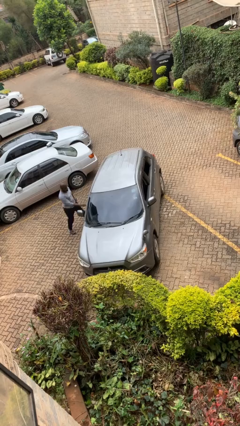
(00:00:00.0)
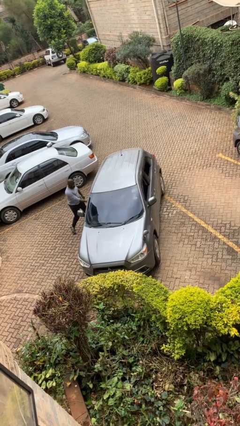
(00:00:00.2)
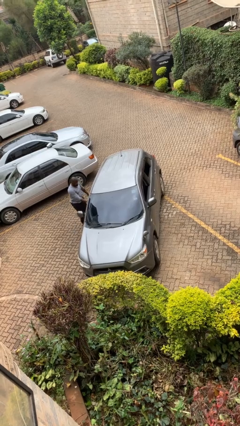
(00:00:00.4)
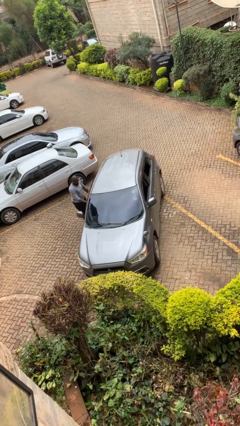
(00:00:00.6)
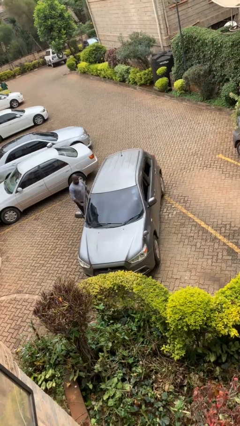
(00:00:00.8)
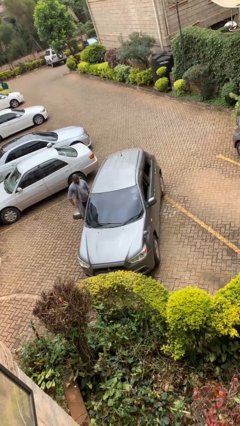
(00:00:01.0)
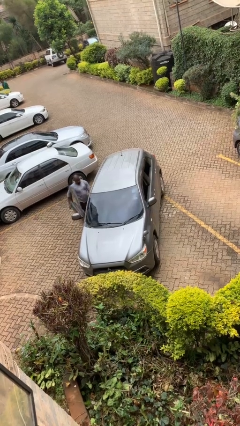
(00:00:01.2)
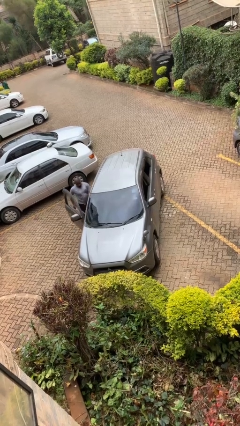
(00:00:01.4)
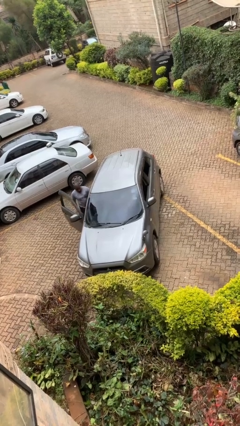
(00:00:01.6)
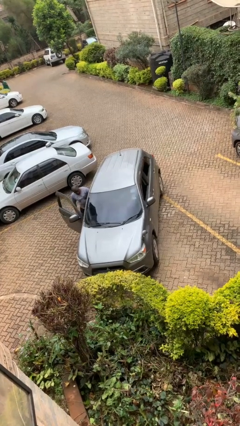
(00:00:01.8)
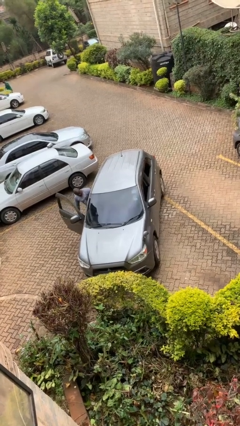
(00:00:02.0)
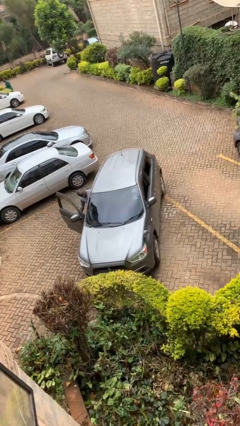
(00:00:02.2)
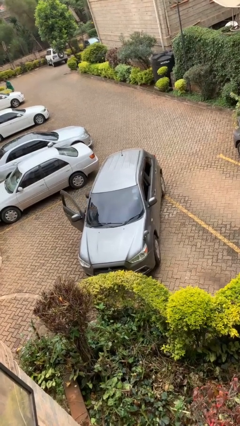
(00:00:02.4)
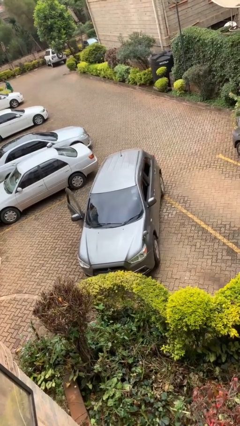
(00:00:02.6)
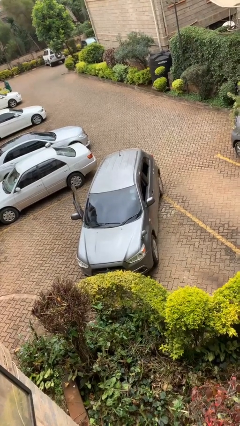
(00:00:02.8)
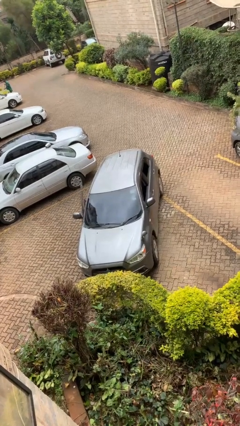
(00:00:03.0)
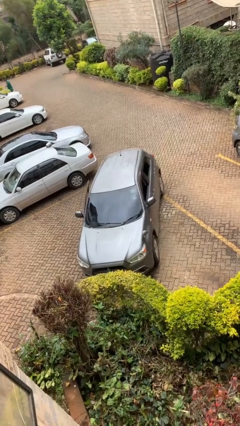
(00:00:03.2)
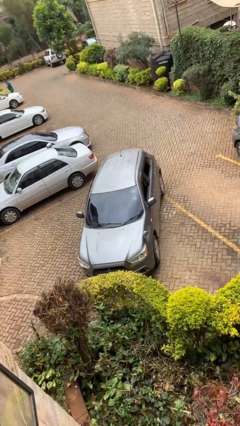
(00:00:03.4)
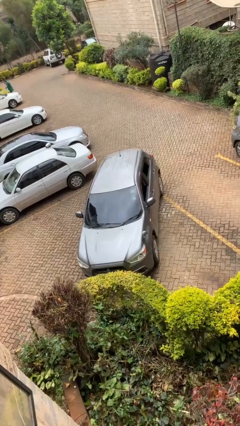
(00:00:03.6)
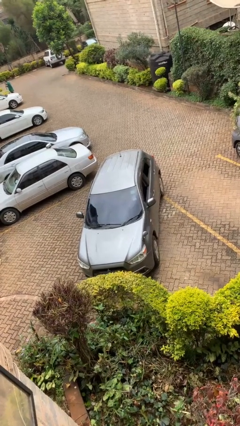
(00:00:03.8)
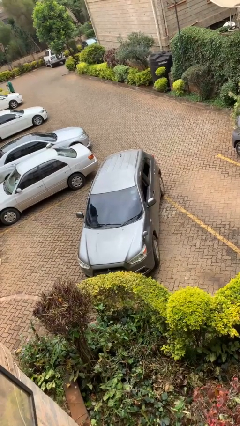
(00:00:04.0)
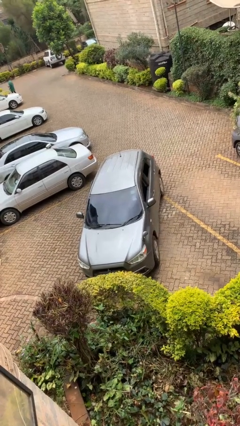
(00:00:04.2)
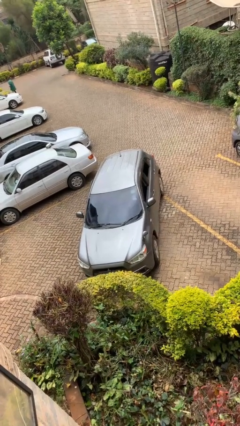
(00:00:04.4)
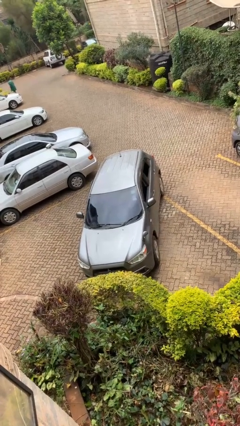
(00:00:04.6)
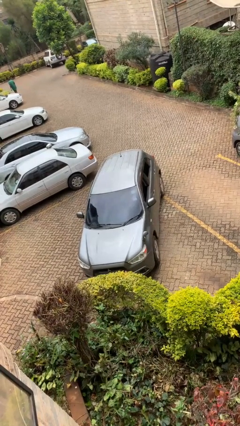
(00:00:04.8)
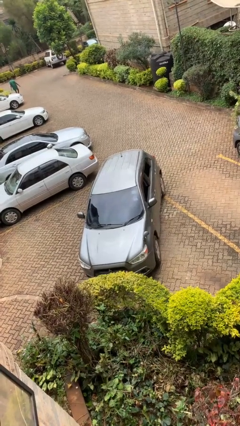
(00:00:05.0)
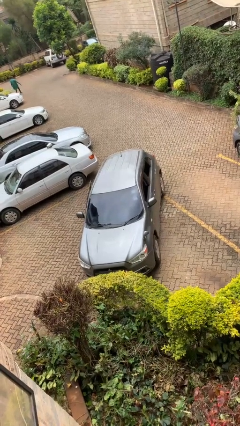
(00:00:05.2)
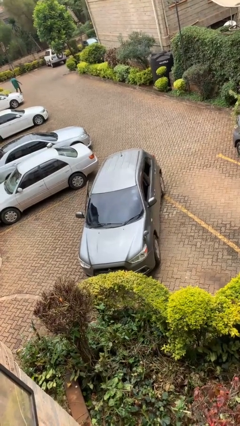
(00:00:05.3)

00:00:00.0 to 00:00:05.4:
car picks up person

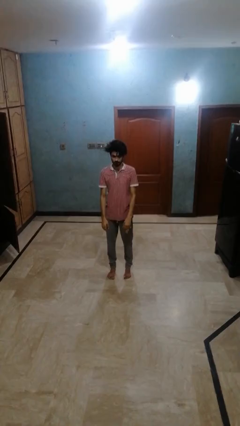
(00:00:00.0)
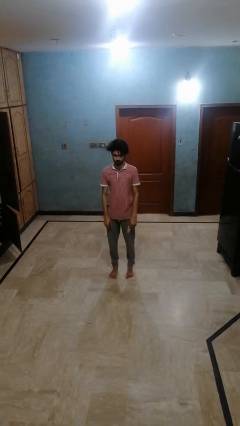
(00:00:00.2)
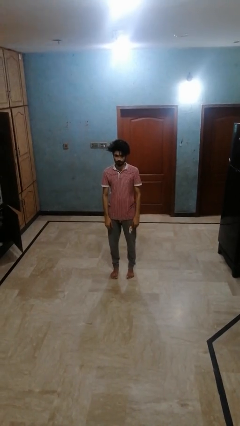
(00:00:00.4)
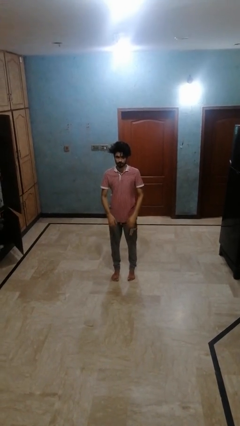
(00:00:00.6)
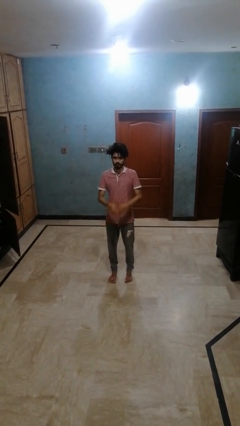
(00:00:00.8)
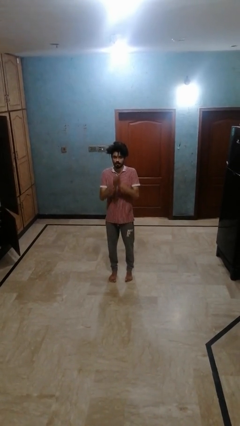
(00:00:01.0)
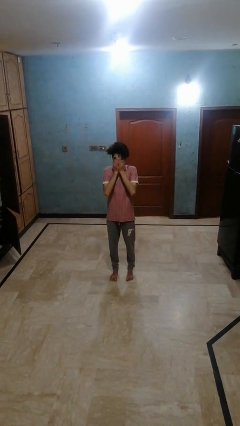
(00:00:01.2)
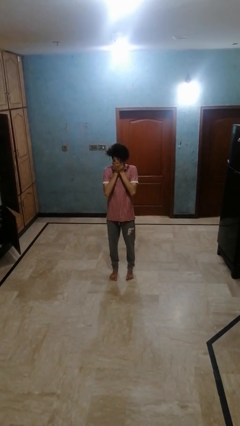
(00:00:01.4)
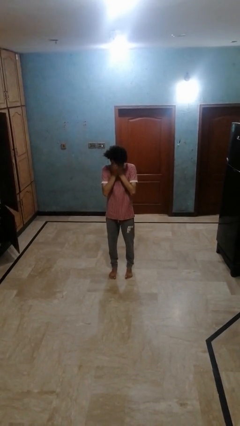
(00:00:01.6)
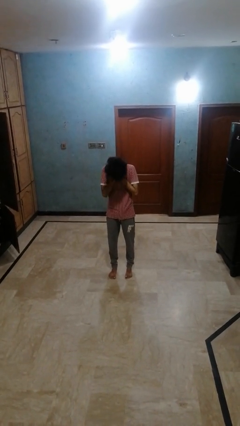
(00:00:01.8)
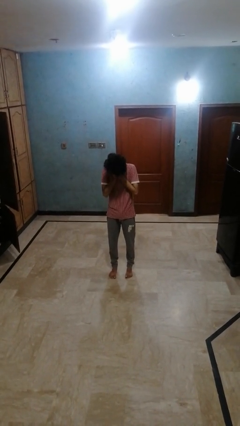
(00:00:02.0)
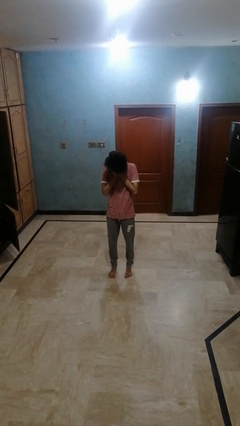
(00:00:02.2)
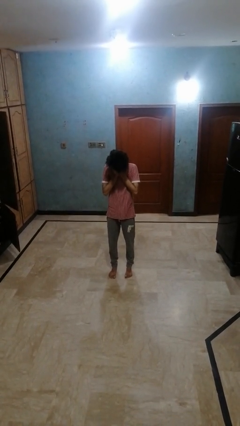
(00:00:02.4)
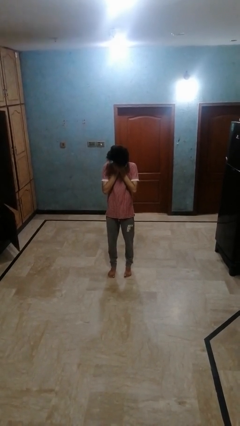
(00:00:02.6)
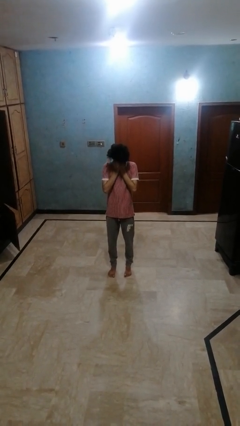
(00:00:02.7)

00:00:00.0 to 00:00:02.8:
person sneezes into hand

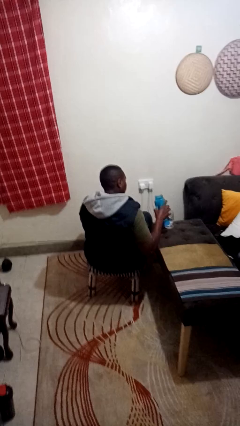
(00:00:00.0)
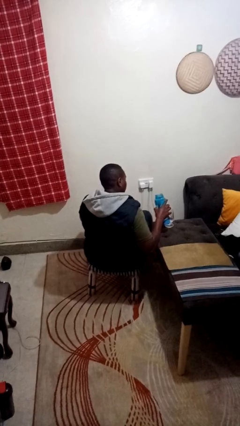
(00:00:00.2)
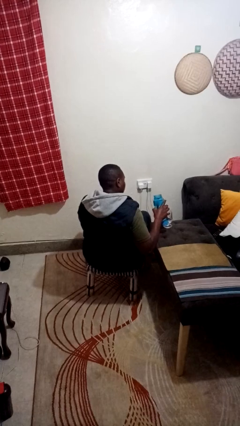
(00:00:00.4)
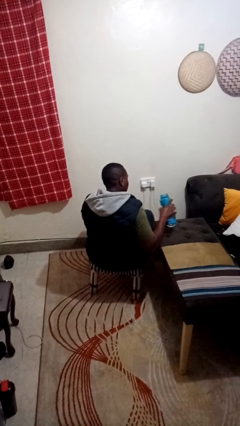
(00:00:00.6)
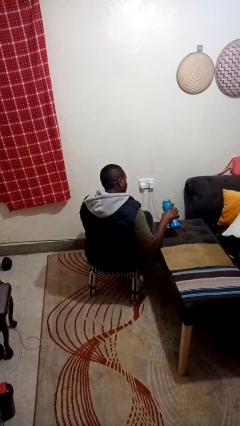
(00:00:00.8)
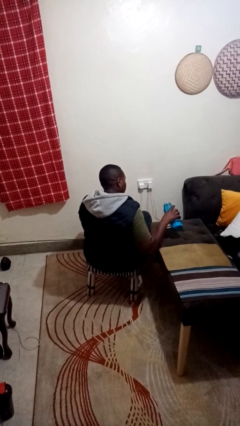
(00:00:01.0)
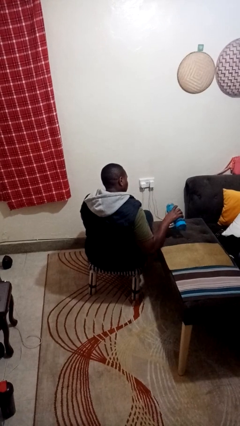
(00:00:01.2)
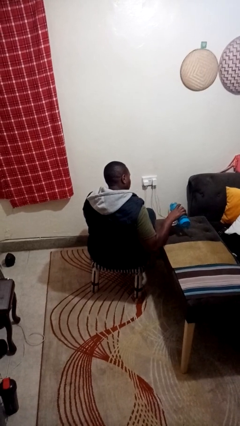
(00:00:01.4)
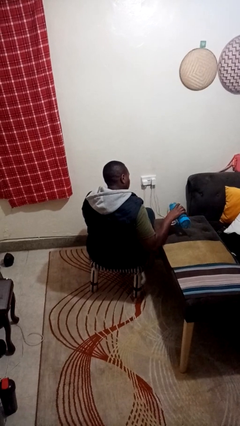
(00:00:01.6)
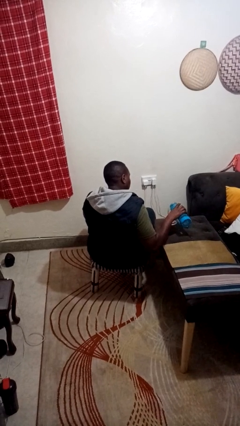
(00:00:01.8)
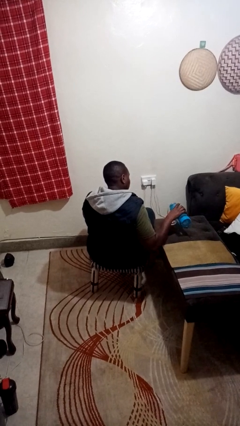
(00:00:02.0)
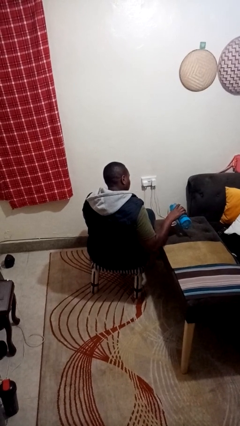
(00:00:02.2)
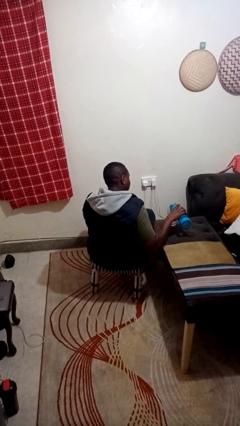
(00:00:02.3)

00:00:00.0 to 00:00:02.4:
person pours liquid into cup

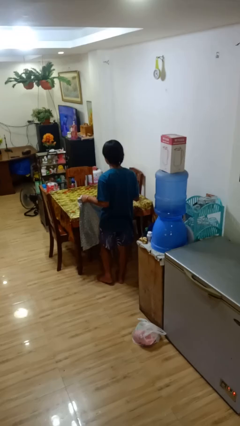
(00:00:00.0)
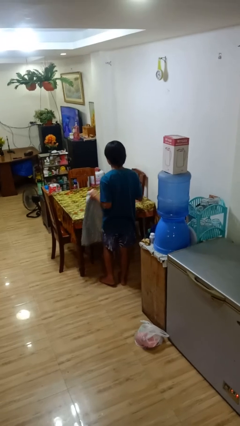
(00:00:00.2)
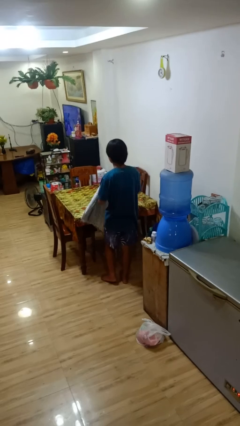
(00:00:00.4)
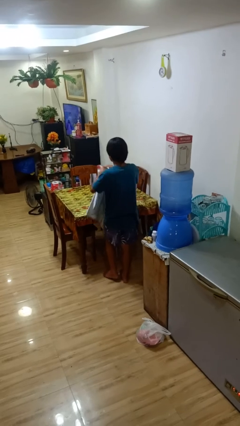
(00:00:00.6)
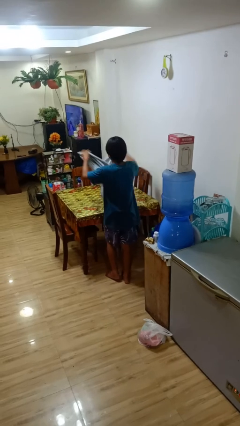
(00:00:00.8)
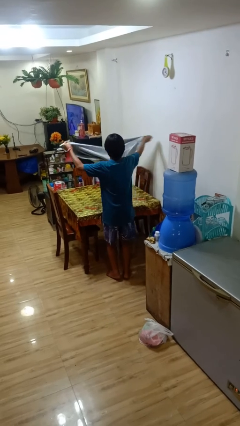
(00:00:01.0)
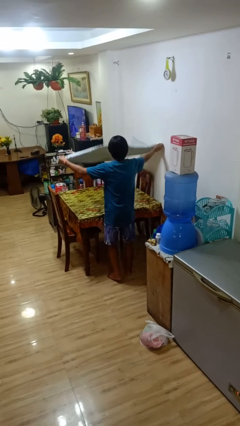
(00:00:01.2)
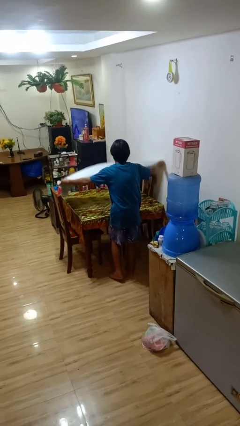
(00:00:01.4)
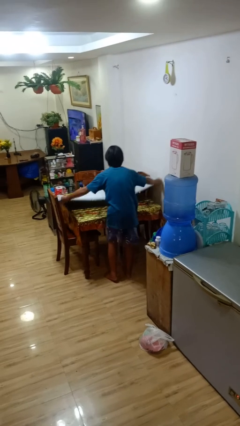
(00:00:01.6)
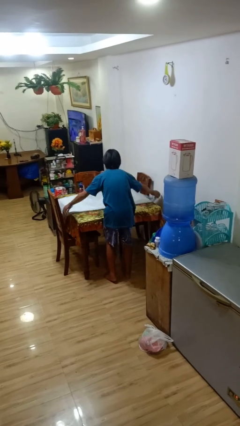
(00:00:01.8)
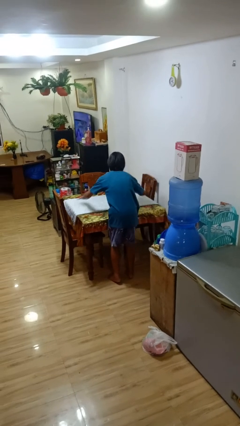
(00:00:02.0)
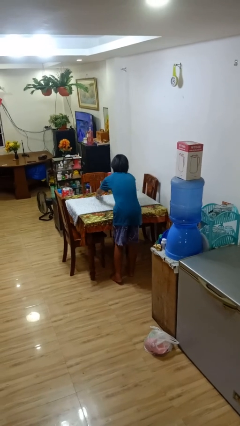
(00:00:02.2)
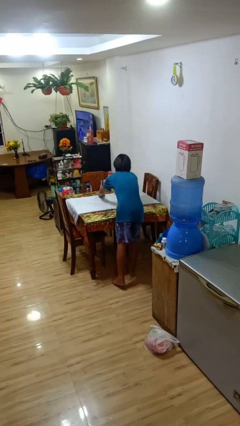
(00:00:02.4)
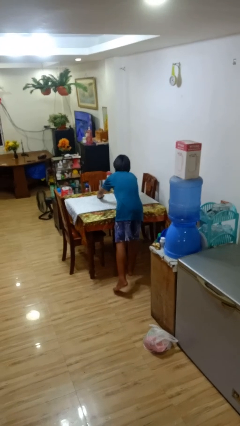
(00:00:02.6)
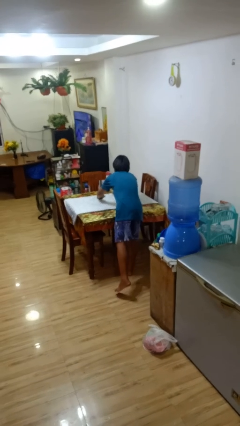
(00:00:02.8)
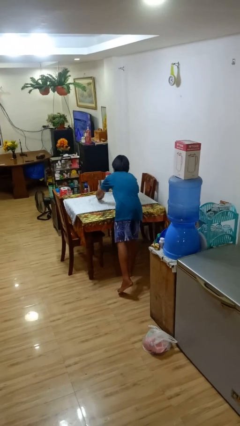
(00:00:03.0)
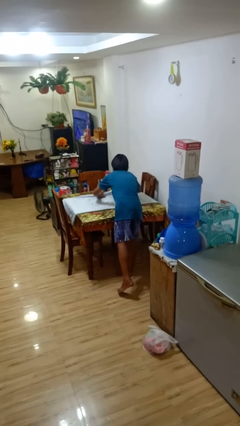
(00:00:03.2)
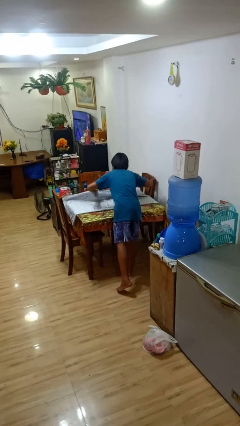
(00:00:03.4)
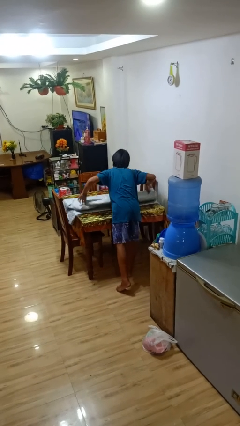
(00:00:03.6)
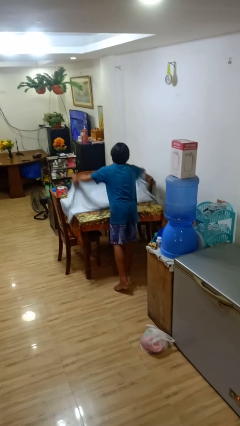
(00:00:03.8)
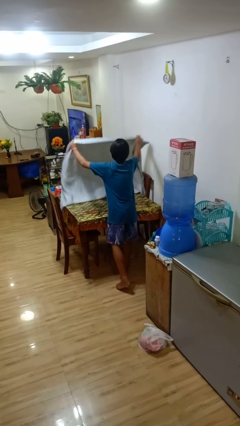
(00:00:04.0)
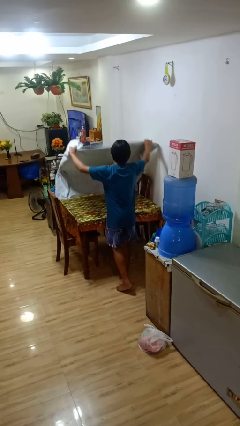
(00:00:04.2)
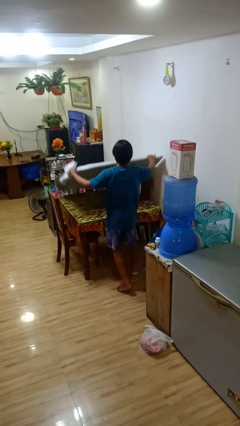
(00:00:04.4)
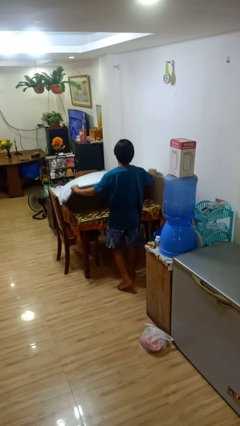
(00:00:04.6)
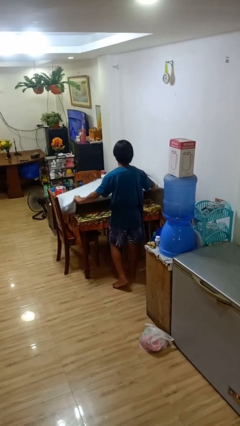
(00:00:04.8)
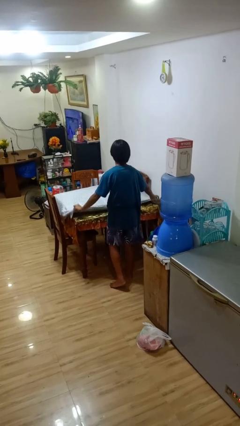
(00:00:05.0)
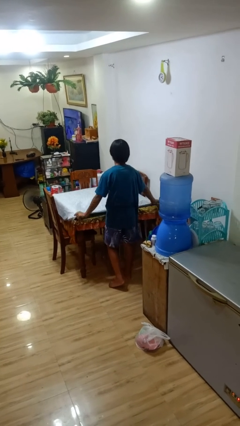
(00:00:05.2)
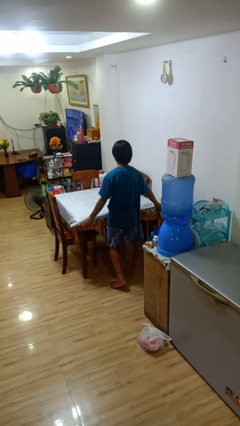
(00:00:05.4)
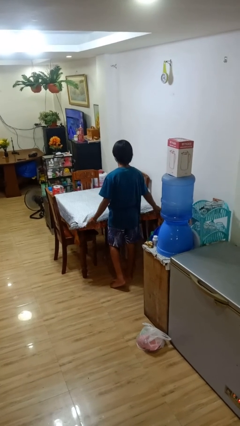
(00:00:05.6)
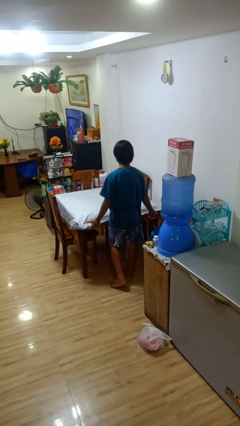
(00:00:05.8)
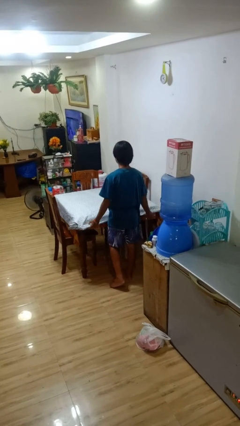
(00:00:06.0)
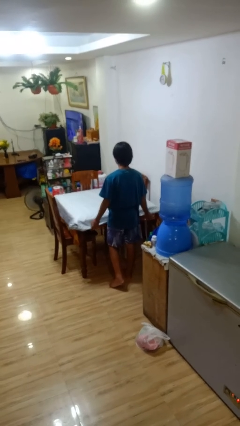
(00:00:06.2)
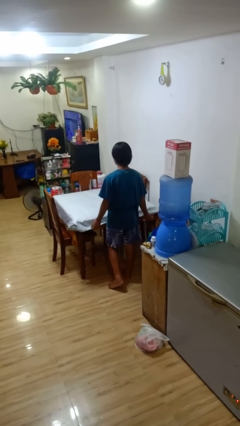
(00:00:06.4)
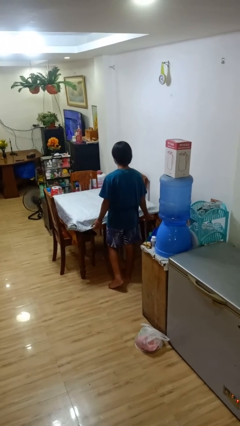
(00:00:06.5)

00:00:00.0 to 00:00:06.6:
person spreads tablecloth
